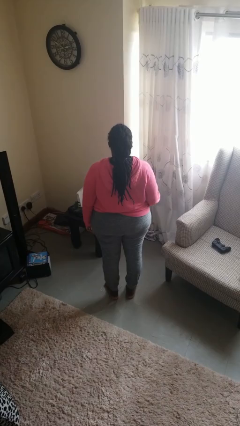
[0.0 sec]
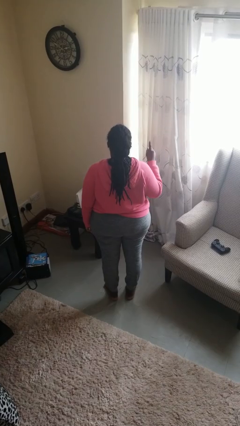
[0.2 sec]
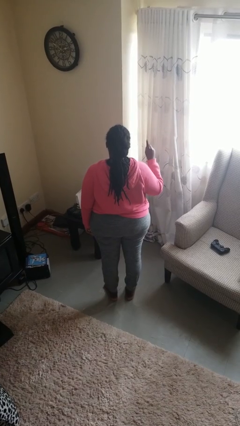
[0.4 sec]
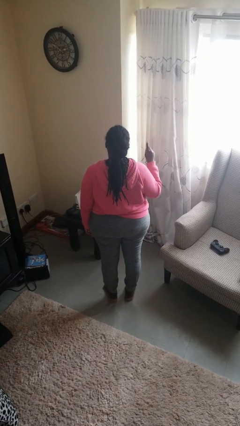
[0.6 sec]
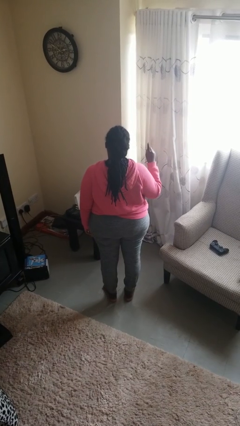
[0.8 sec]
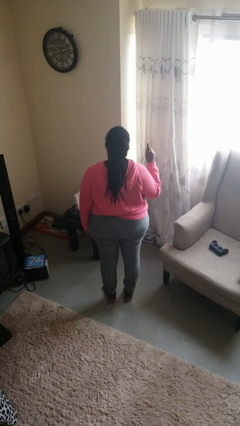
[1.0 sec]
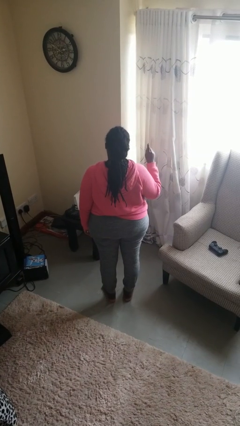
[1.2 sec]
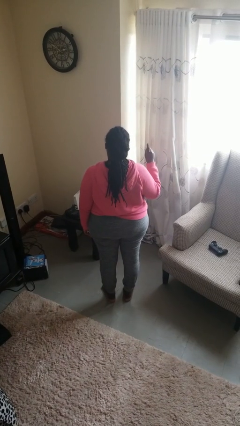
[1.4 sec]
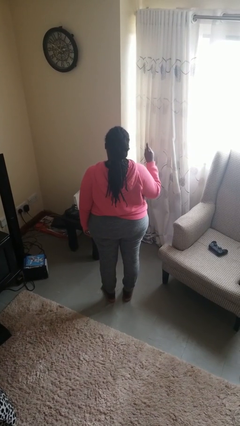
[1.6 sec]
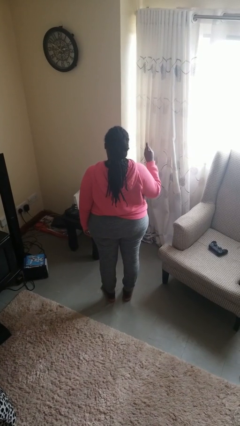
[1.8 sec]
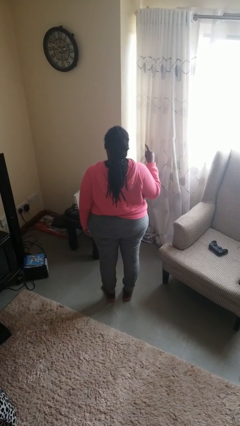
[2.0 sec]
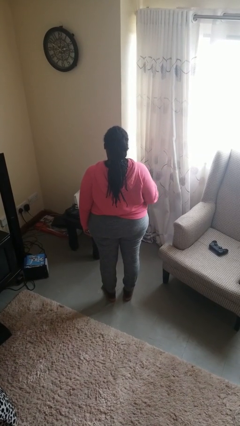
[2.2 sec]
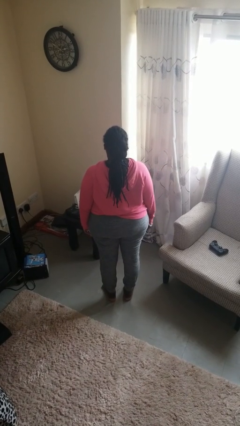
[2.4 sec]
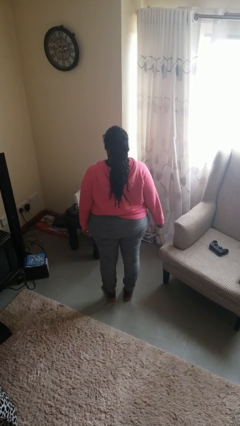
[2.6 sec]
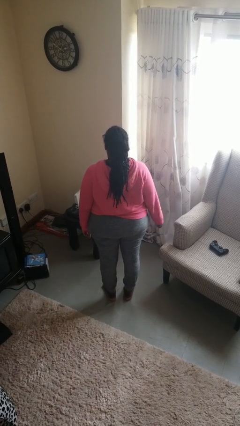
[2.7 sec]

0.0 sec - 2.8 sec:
person gestures number one

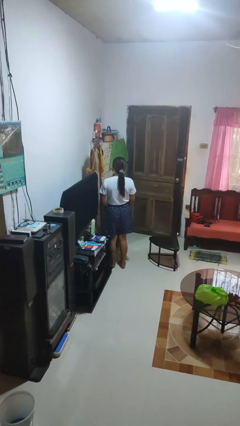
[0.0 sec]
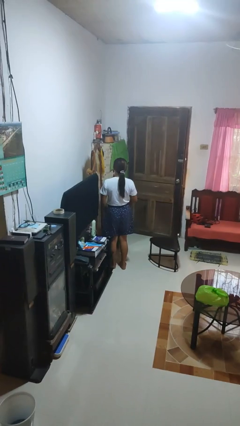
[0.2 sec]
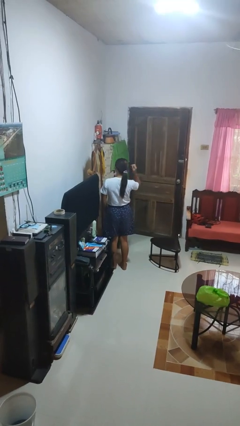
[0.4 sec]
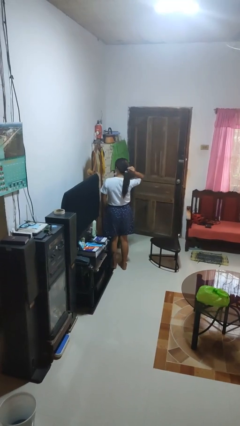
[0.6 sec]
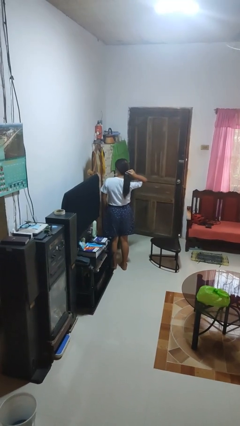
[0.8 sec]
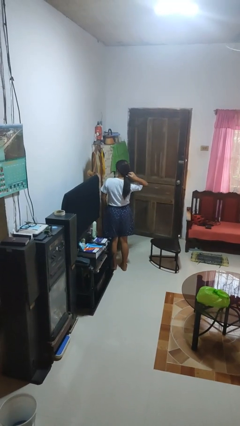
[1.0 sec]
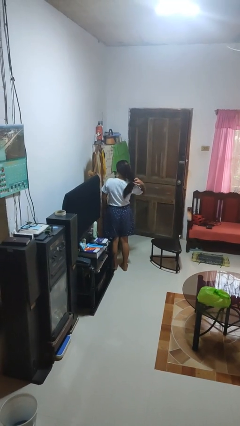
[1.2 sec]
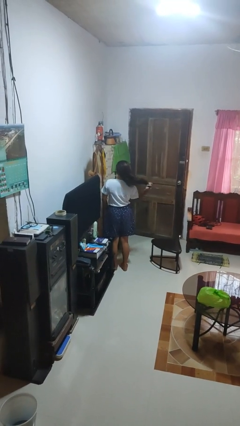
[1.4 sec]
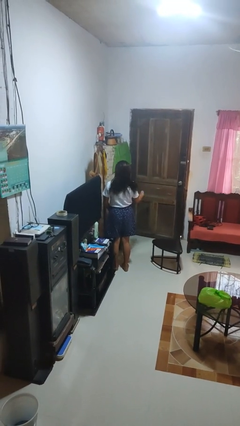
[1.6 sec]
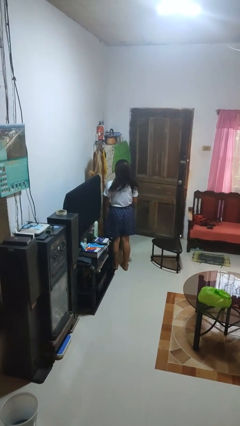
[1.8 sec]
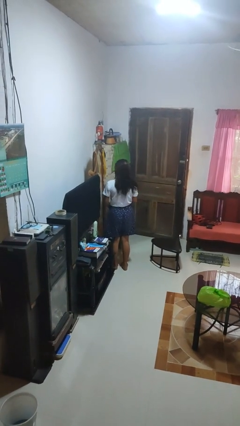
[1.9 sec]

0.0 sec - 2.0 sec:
person takes off hairtie

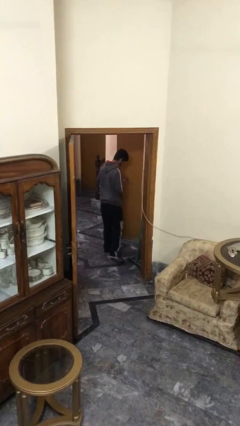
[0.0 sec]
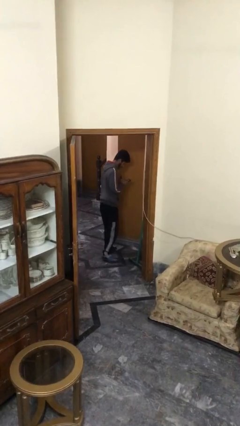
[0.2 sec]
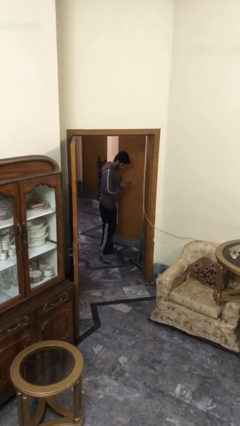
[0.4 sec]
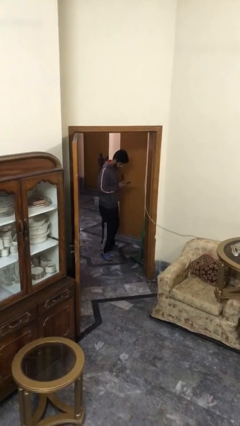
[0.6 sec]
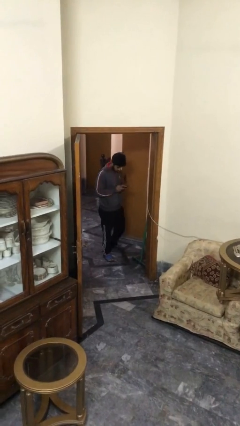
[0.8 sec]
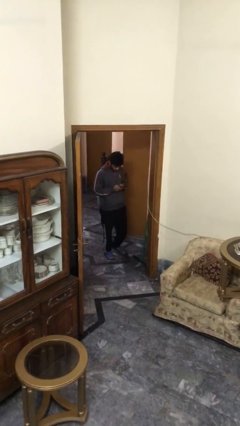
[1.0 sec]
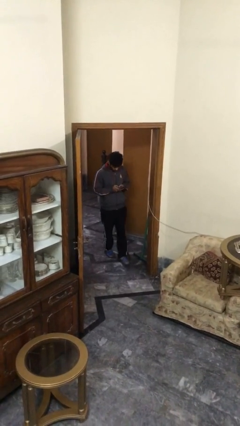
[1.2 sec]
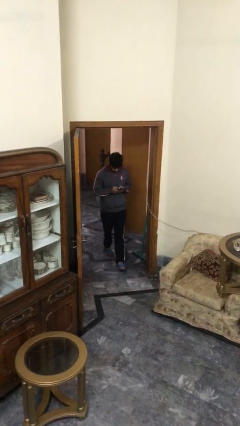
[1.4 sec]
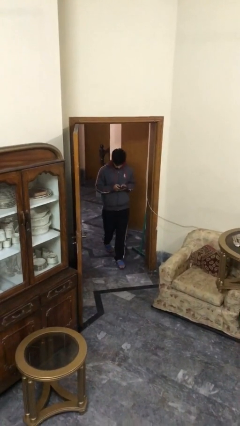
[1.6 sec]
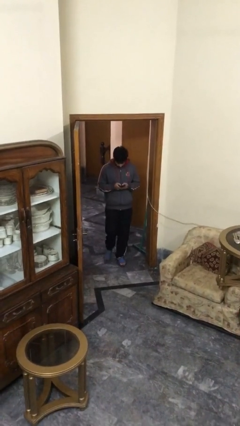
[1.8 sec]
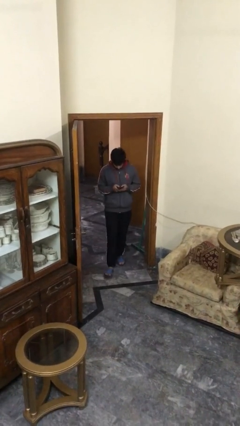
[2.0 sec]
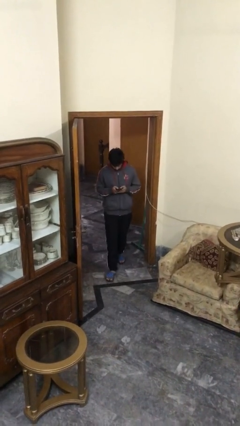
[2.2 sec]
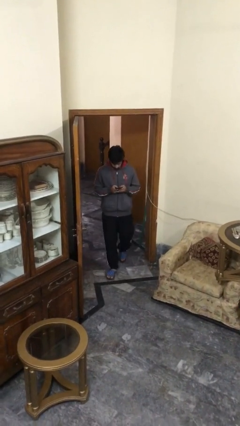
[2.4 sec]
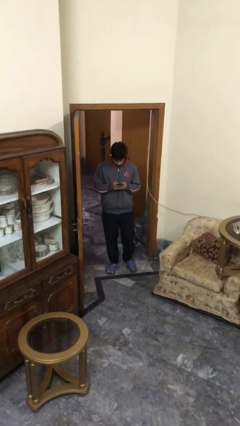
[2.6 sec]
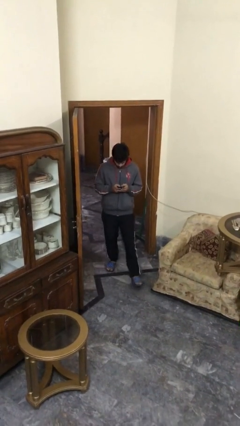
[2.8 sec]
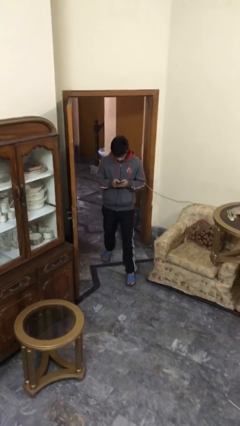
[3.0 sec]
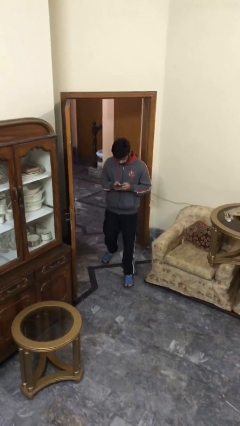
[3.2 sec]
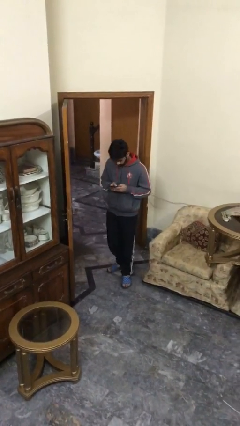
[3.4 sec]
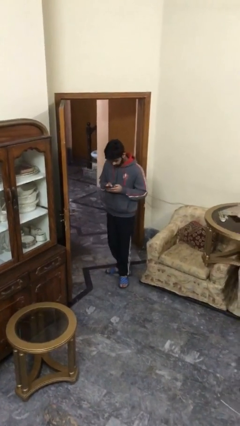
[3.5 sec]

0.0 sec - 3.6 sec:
person enters scene through structure

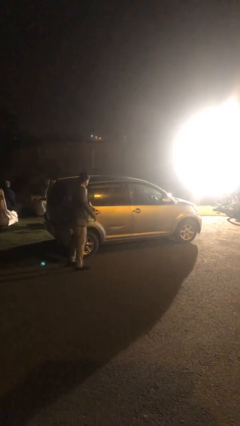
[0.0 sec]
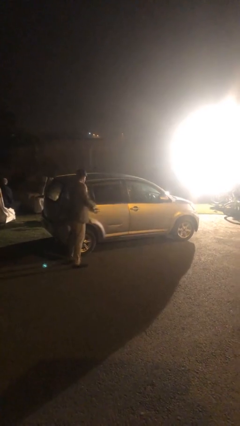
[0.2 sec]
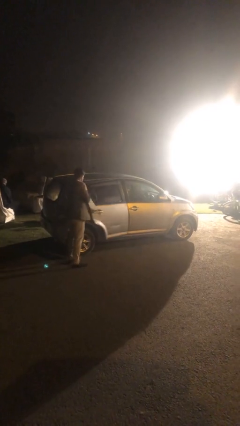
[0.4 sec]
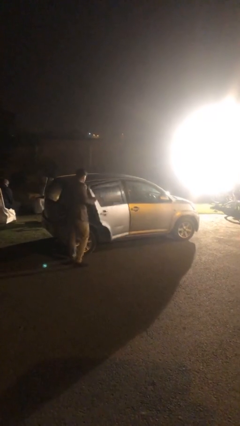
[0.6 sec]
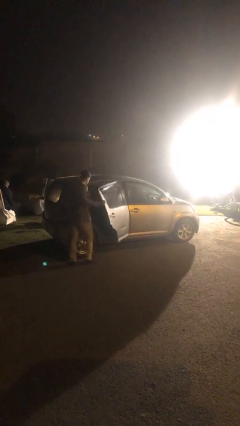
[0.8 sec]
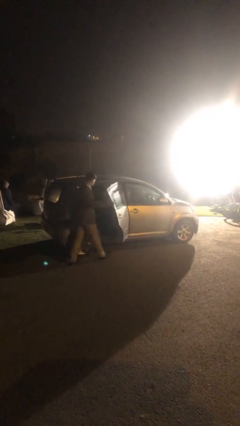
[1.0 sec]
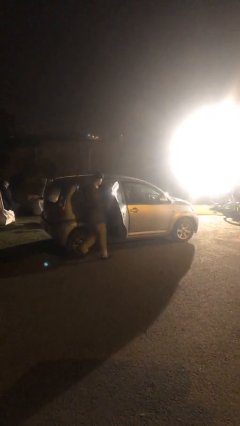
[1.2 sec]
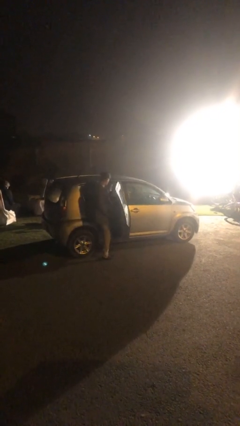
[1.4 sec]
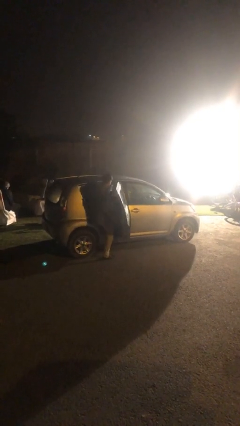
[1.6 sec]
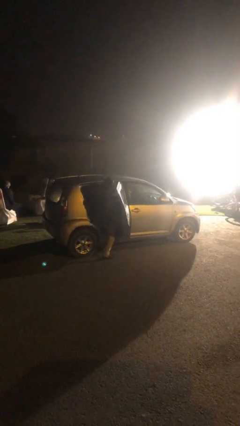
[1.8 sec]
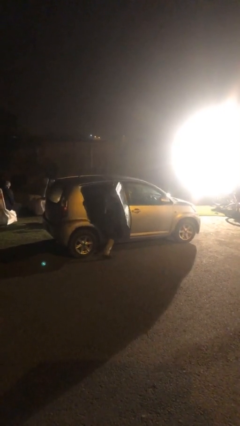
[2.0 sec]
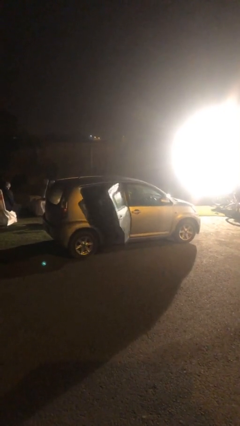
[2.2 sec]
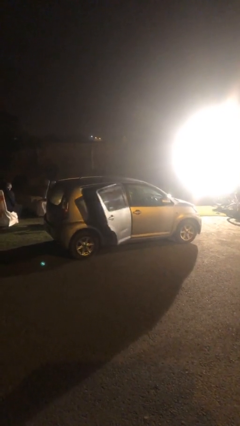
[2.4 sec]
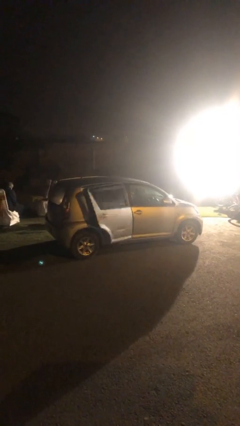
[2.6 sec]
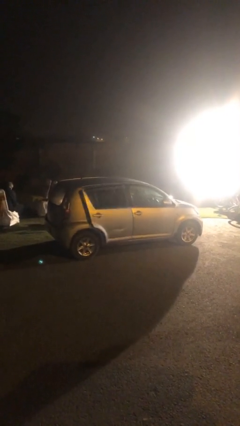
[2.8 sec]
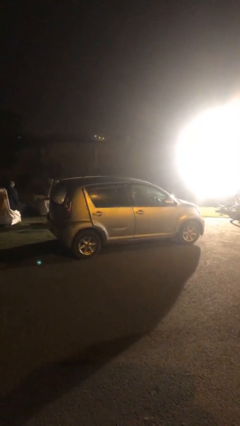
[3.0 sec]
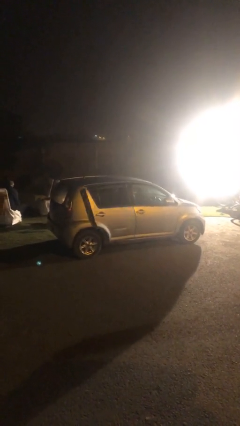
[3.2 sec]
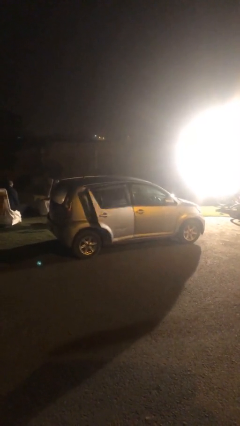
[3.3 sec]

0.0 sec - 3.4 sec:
car picks up person

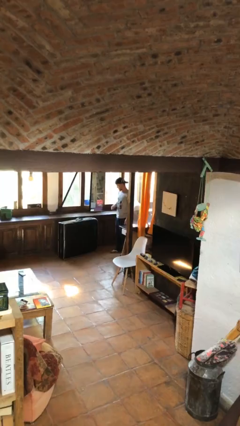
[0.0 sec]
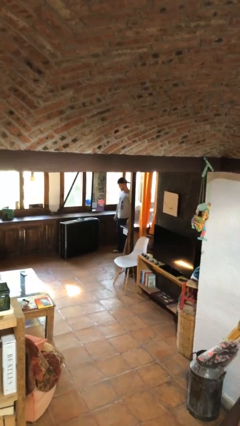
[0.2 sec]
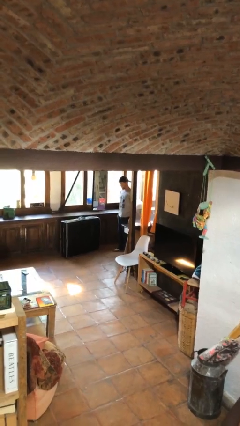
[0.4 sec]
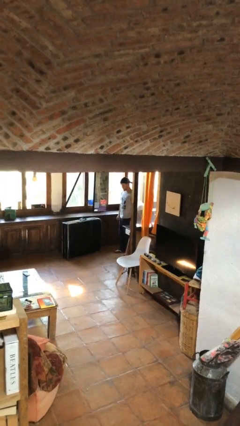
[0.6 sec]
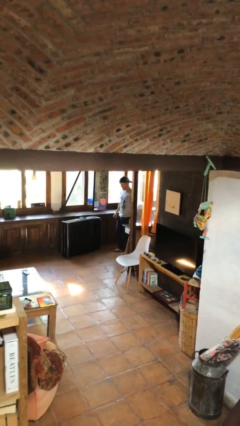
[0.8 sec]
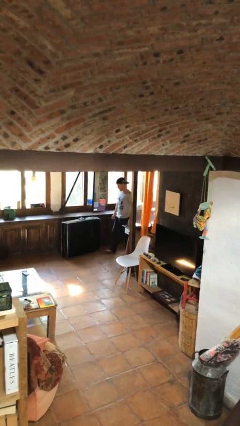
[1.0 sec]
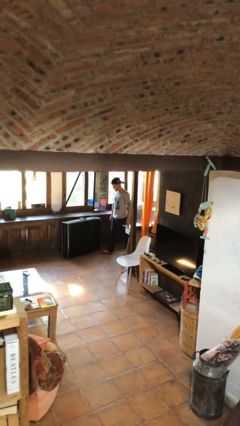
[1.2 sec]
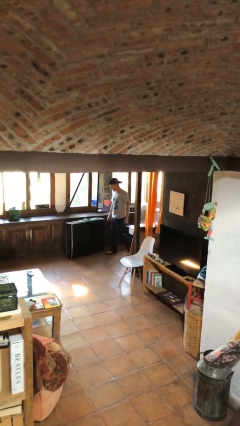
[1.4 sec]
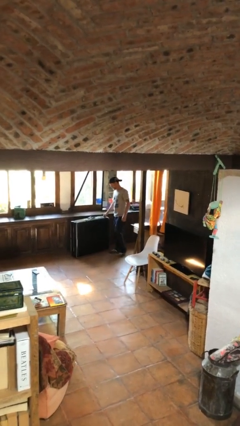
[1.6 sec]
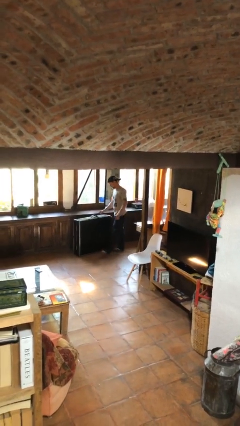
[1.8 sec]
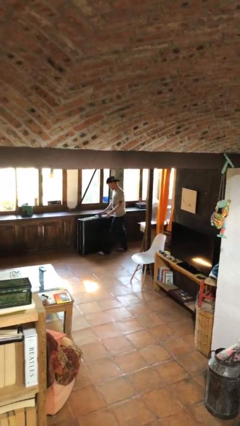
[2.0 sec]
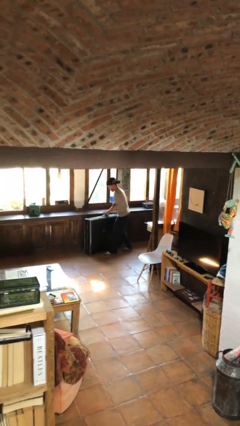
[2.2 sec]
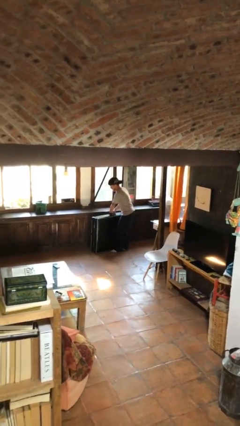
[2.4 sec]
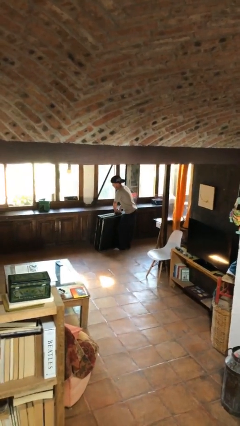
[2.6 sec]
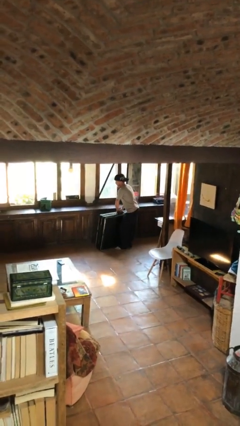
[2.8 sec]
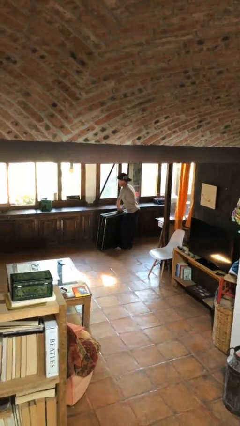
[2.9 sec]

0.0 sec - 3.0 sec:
person picks up object from floor

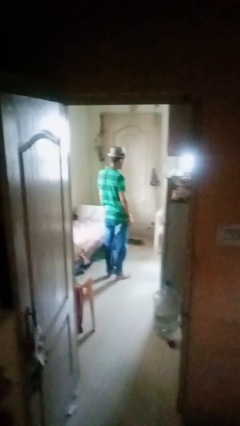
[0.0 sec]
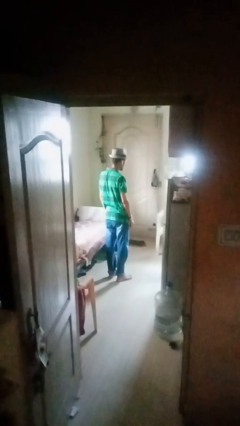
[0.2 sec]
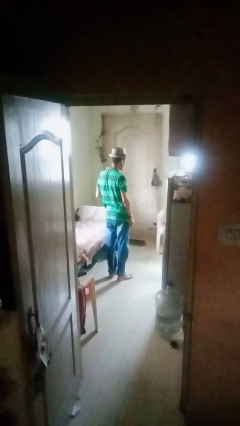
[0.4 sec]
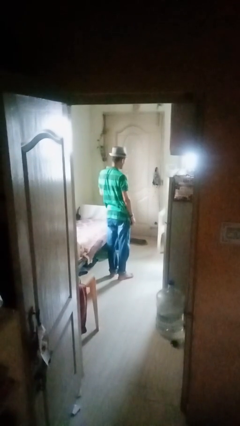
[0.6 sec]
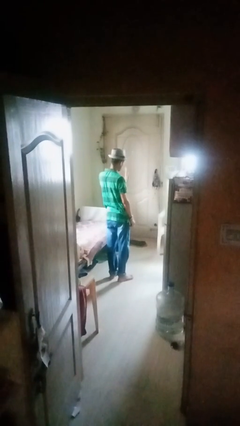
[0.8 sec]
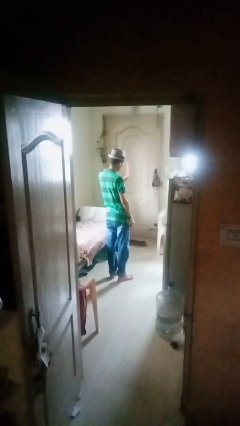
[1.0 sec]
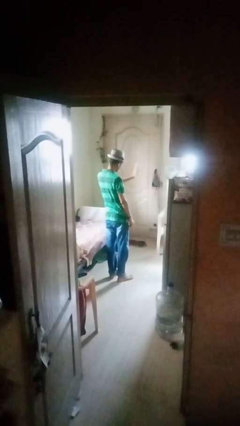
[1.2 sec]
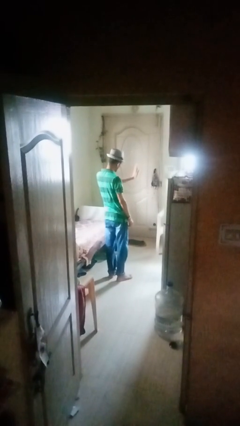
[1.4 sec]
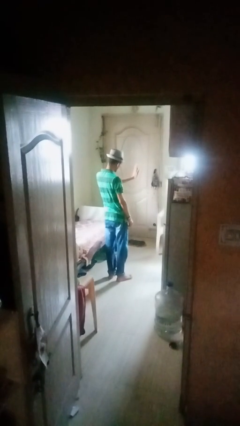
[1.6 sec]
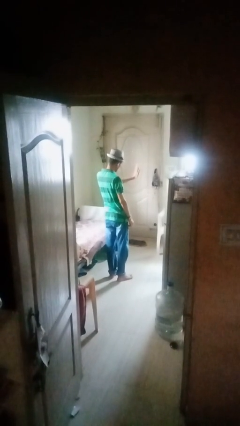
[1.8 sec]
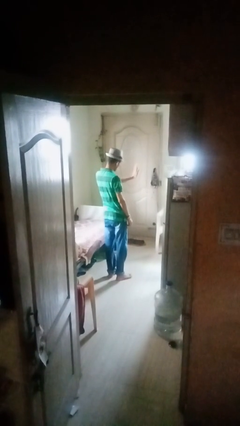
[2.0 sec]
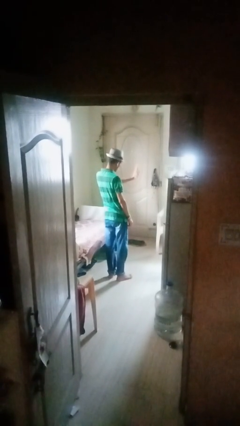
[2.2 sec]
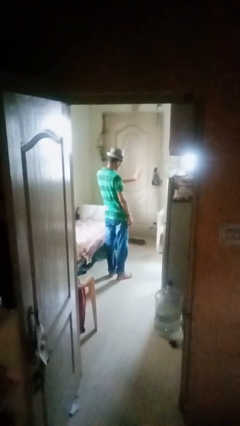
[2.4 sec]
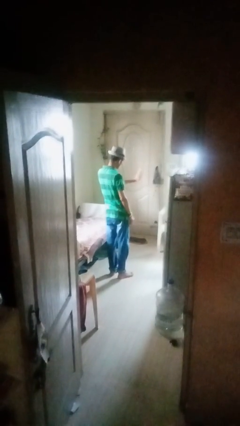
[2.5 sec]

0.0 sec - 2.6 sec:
person gestures stop
